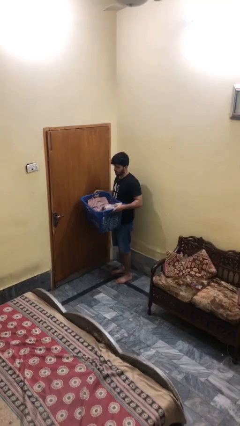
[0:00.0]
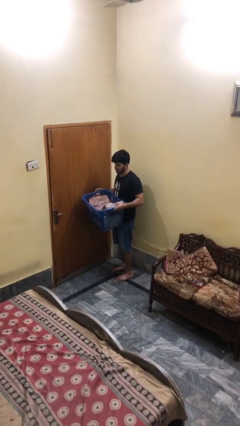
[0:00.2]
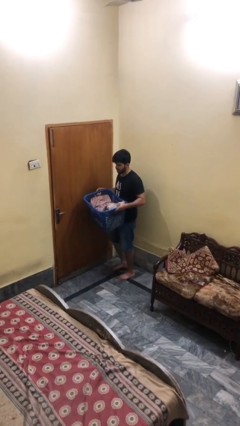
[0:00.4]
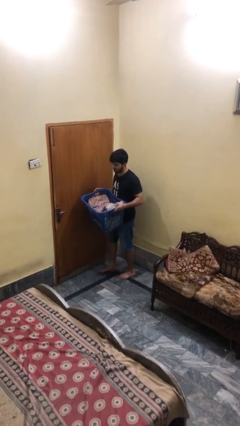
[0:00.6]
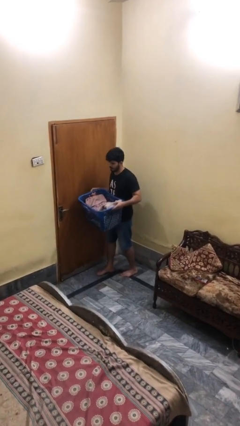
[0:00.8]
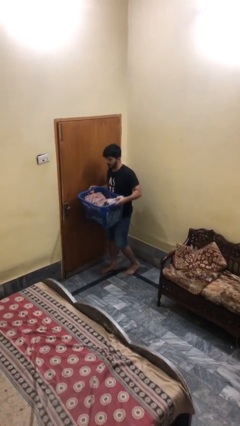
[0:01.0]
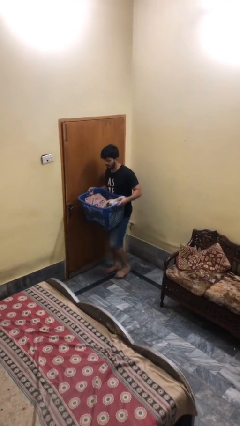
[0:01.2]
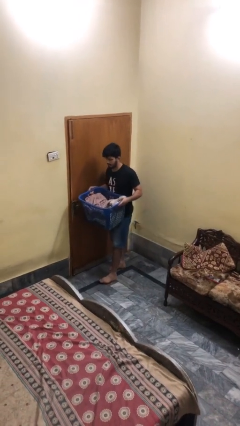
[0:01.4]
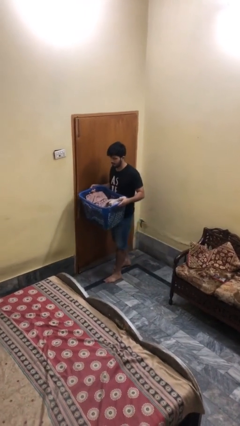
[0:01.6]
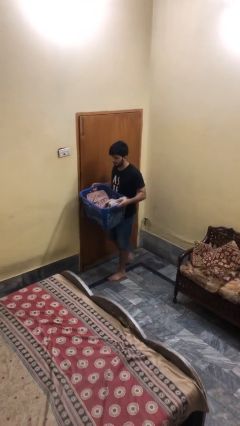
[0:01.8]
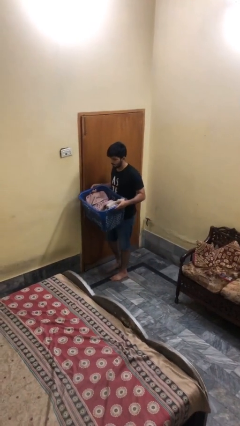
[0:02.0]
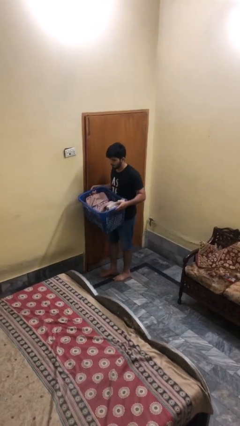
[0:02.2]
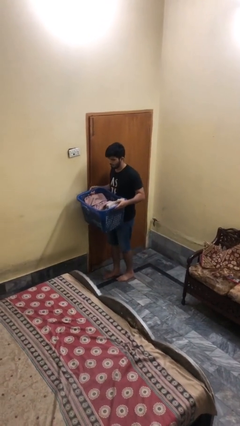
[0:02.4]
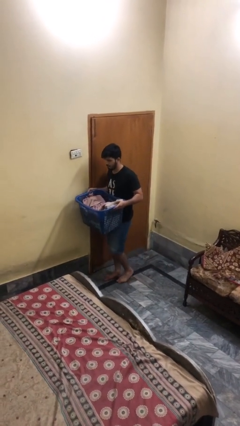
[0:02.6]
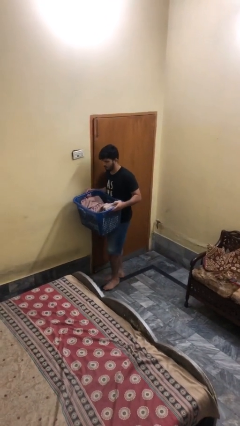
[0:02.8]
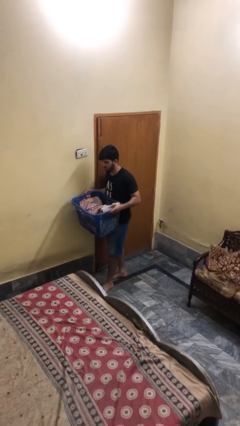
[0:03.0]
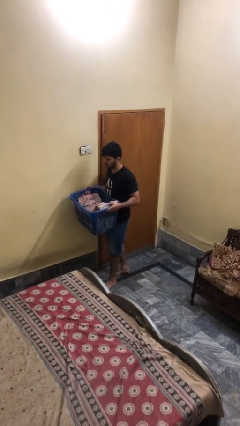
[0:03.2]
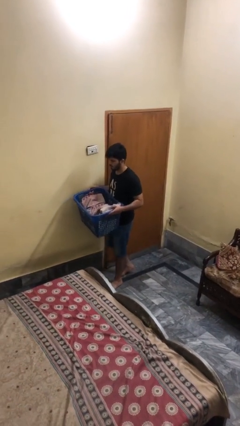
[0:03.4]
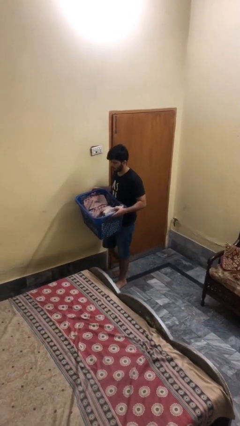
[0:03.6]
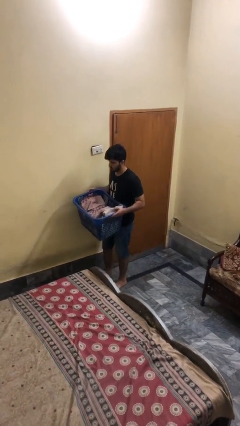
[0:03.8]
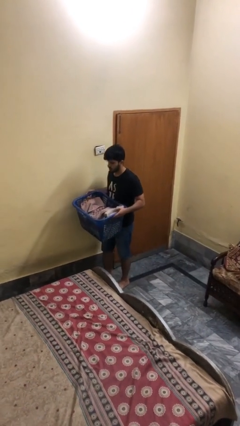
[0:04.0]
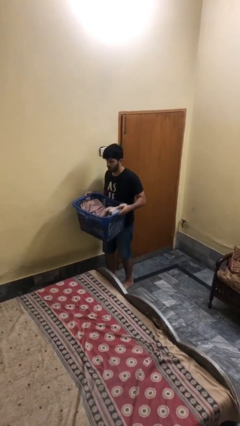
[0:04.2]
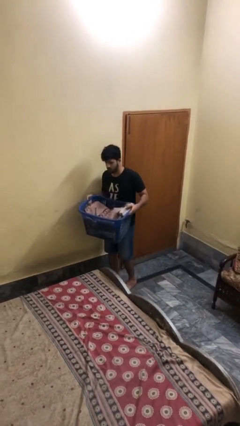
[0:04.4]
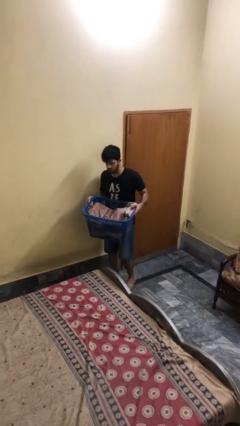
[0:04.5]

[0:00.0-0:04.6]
person carries laundry basket

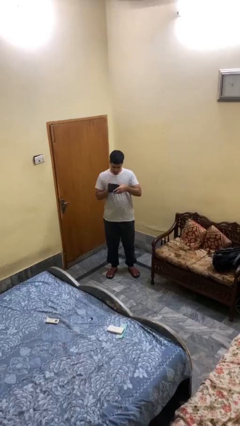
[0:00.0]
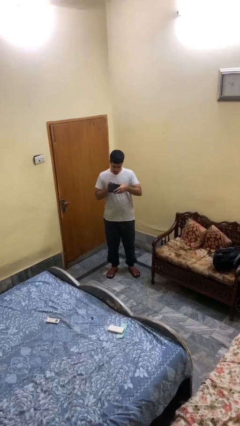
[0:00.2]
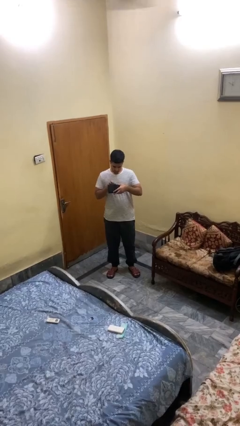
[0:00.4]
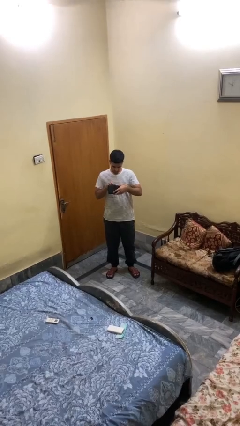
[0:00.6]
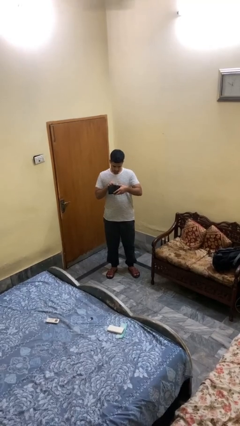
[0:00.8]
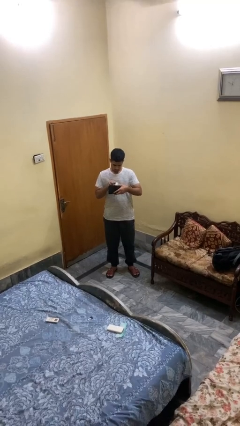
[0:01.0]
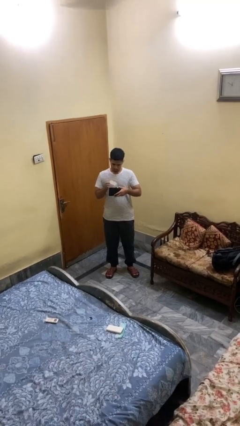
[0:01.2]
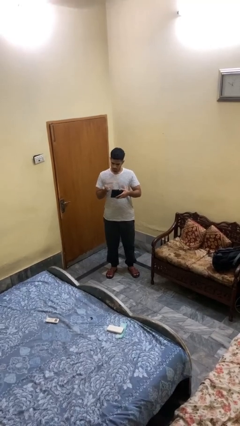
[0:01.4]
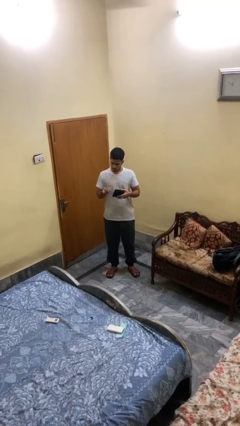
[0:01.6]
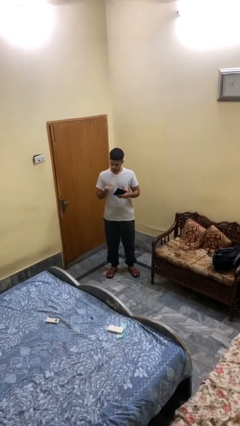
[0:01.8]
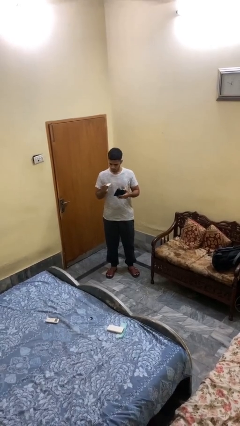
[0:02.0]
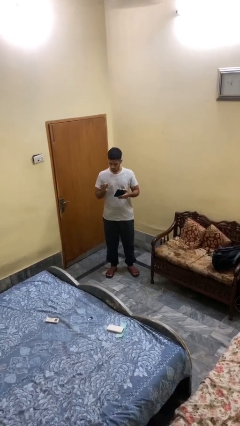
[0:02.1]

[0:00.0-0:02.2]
person takes object from purse

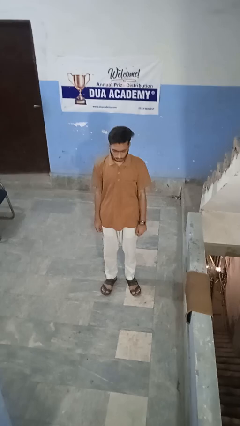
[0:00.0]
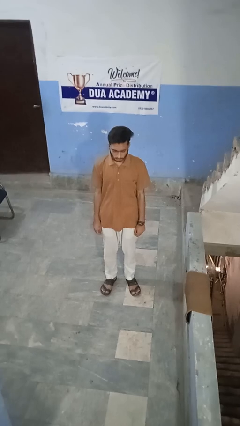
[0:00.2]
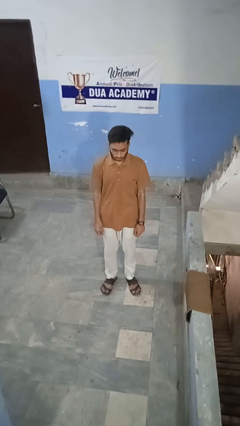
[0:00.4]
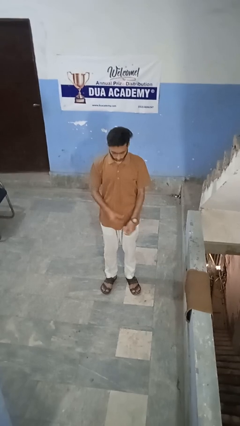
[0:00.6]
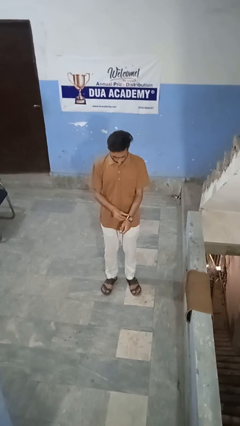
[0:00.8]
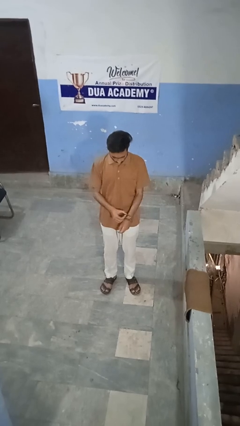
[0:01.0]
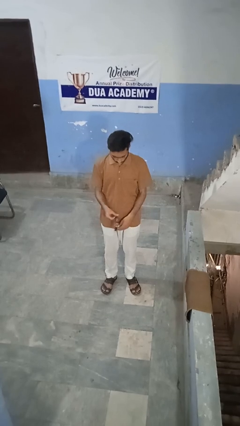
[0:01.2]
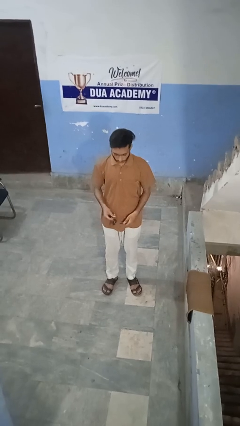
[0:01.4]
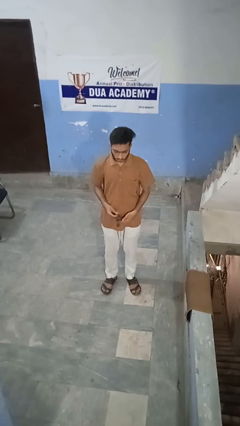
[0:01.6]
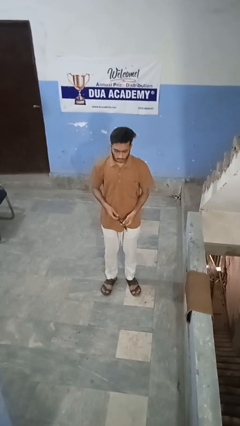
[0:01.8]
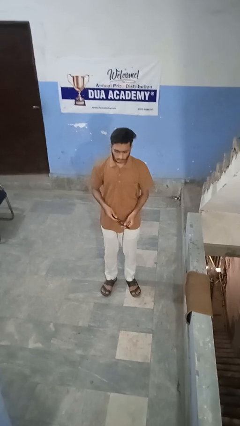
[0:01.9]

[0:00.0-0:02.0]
person takes off wristwatch

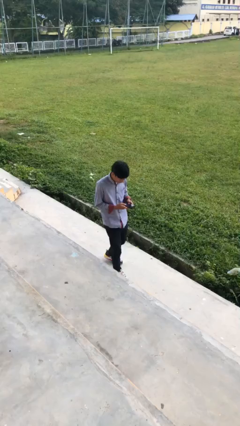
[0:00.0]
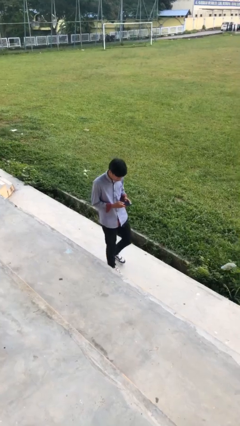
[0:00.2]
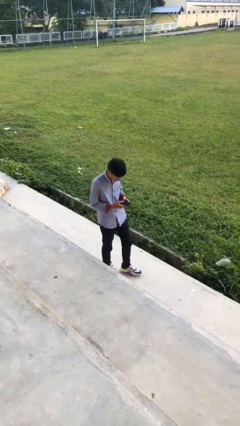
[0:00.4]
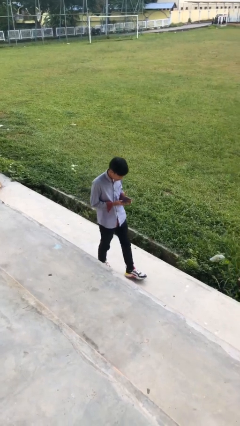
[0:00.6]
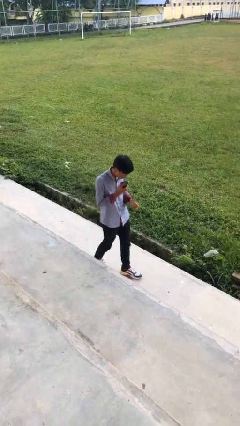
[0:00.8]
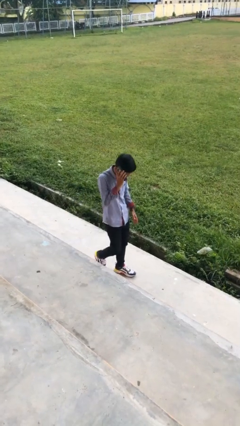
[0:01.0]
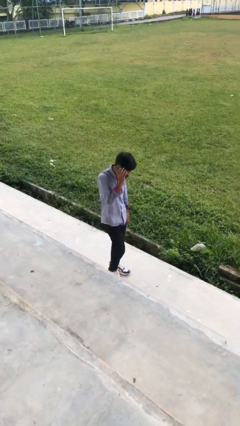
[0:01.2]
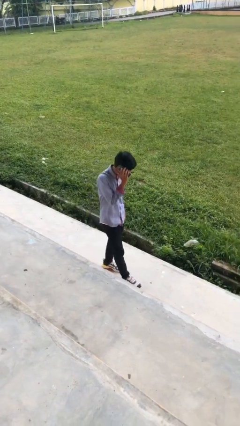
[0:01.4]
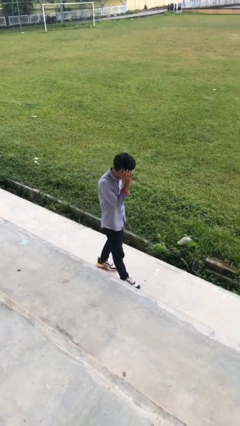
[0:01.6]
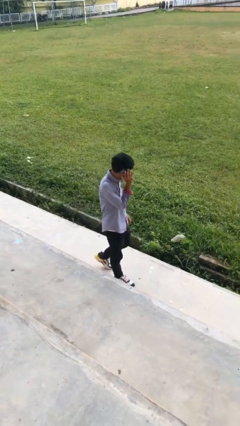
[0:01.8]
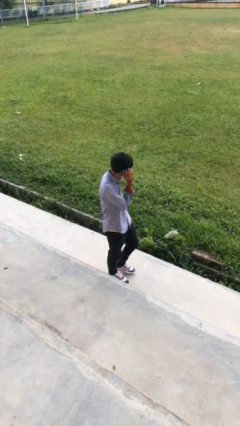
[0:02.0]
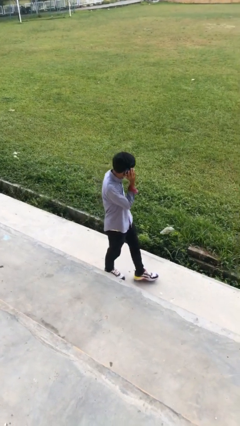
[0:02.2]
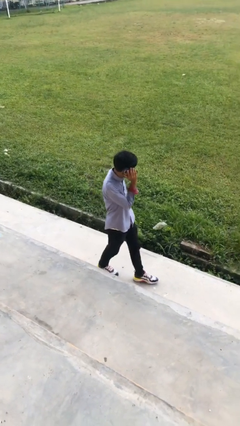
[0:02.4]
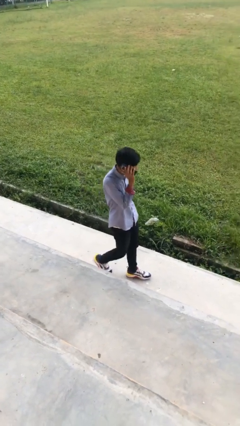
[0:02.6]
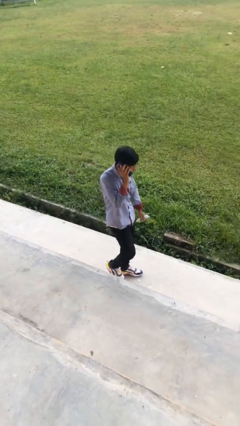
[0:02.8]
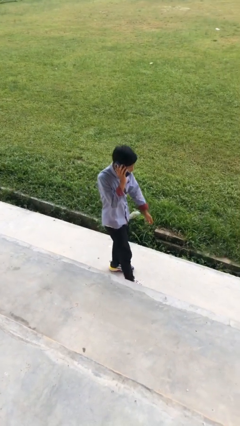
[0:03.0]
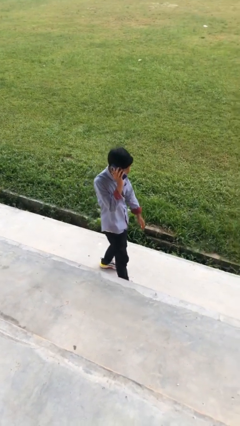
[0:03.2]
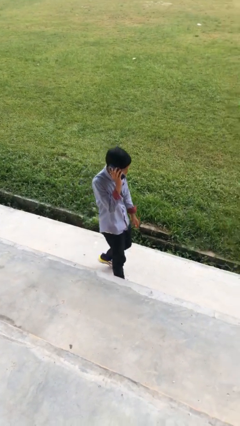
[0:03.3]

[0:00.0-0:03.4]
person talks on phone

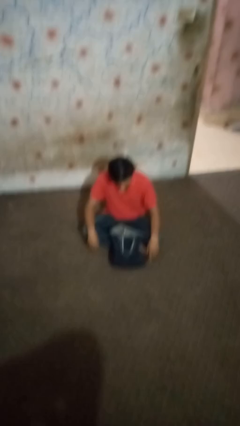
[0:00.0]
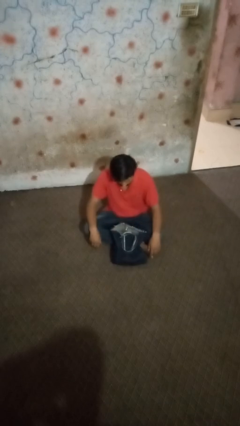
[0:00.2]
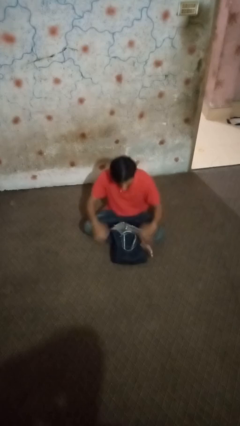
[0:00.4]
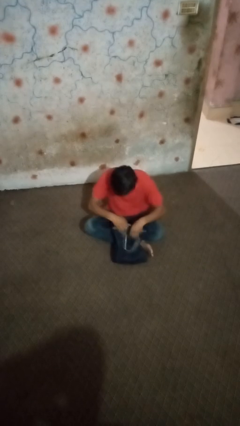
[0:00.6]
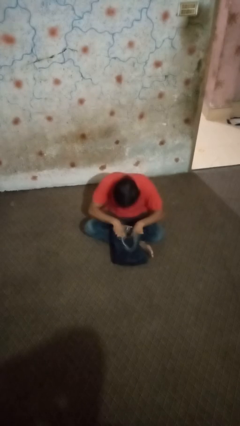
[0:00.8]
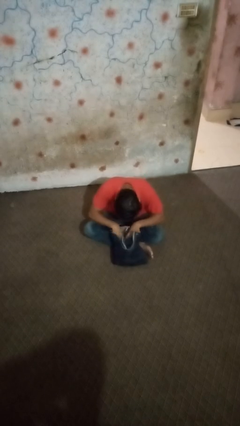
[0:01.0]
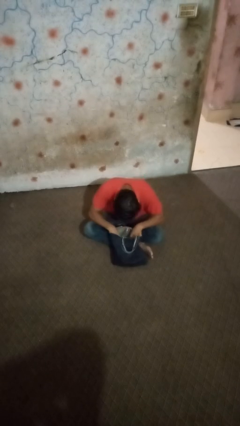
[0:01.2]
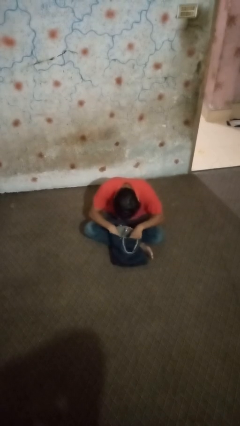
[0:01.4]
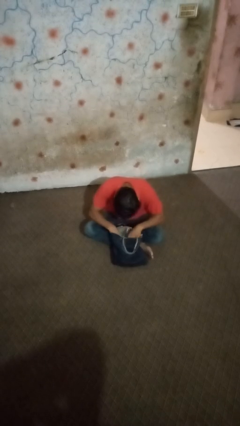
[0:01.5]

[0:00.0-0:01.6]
person searches in bag

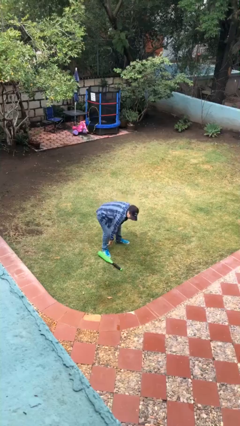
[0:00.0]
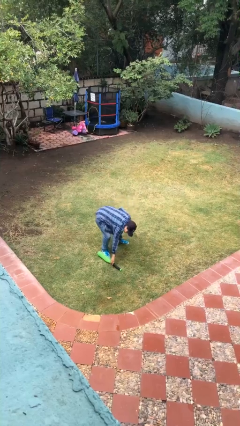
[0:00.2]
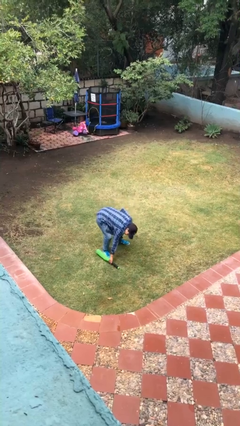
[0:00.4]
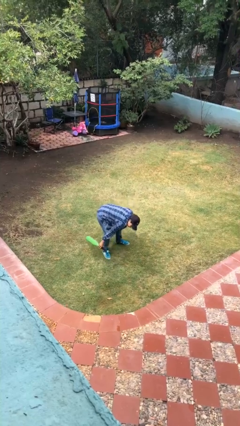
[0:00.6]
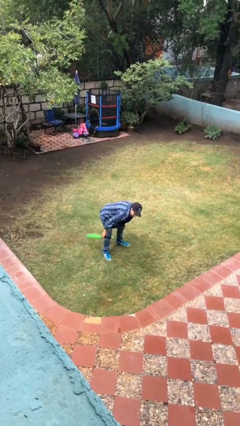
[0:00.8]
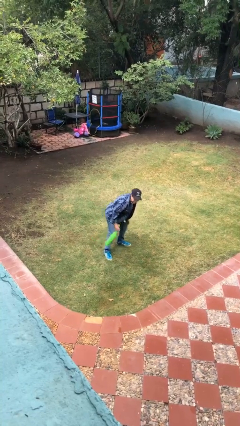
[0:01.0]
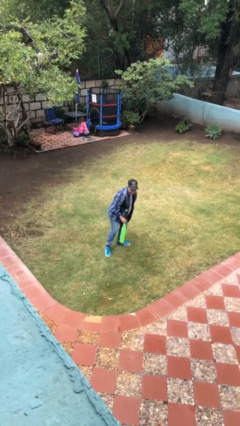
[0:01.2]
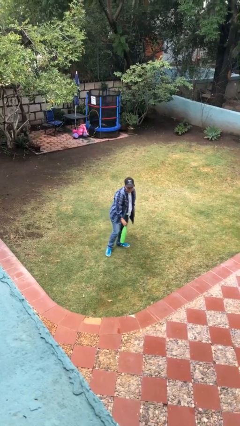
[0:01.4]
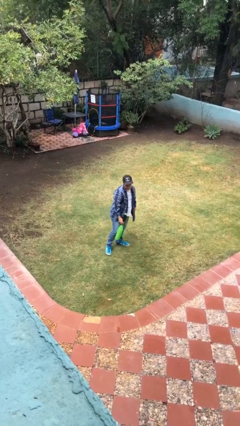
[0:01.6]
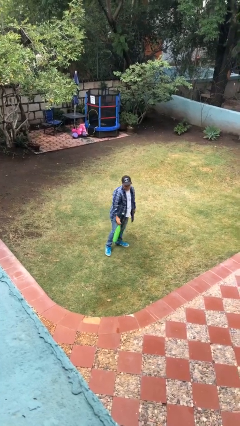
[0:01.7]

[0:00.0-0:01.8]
person picks up object from floor

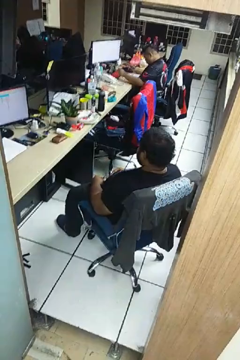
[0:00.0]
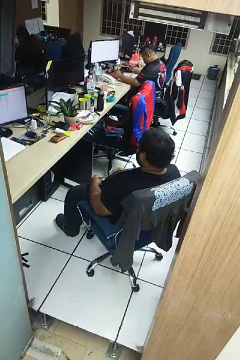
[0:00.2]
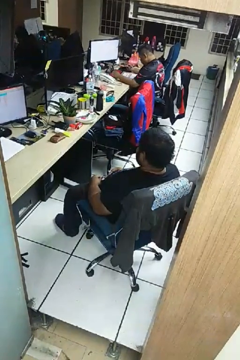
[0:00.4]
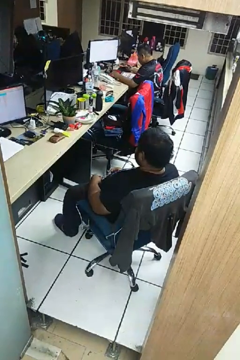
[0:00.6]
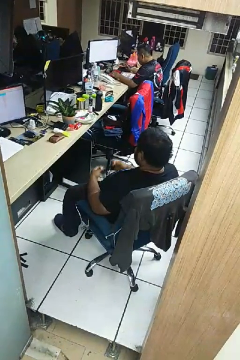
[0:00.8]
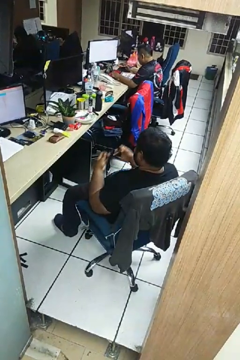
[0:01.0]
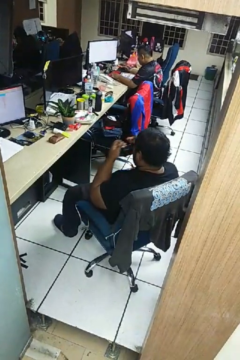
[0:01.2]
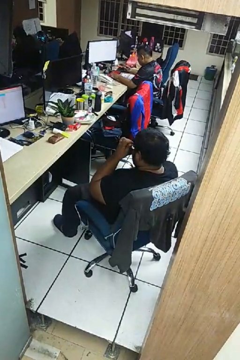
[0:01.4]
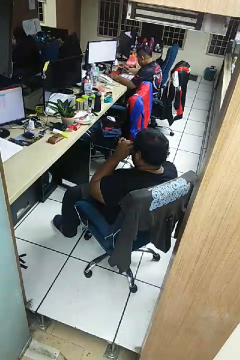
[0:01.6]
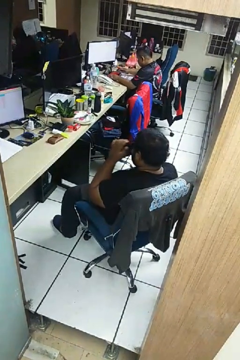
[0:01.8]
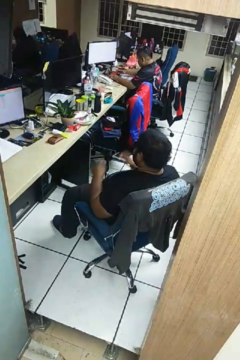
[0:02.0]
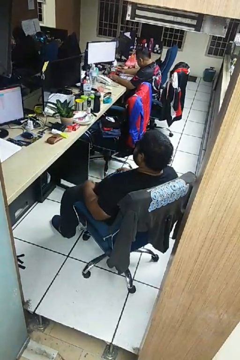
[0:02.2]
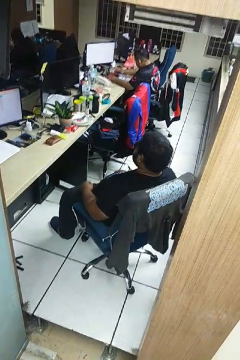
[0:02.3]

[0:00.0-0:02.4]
person puts on sunglasses
